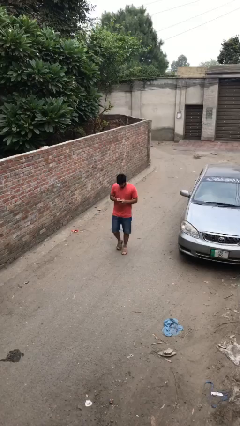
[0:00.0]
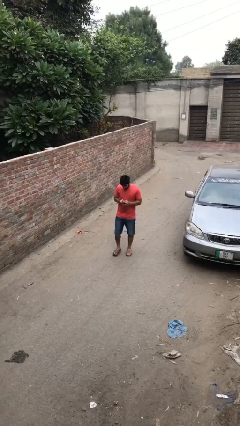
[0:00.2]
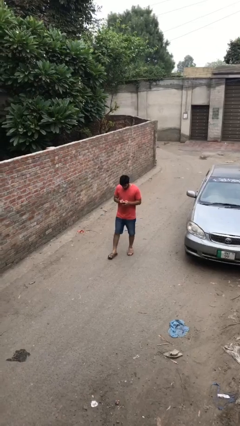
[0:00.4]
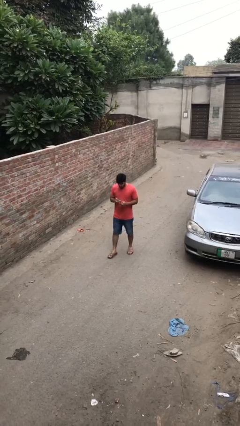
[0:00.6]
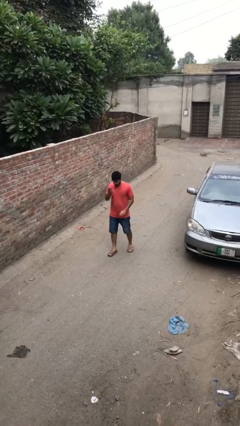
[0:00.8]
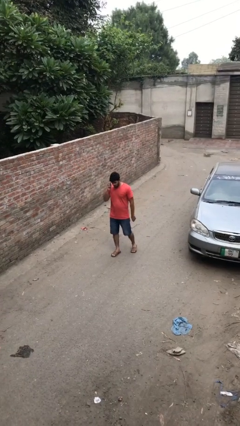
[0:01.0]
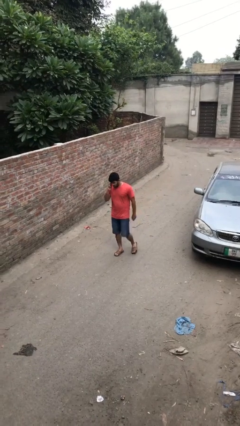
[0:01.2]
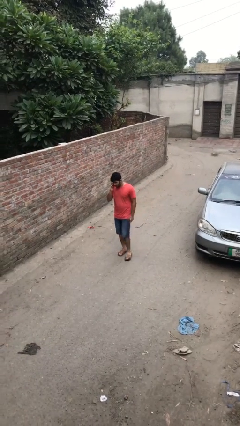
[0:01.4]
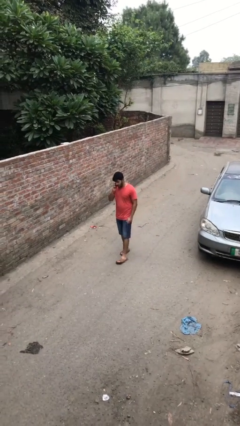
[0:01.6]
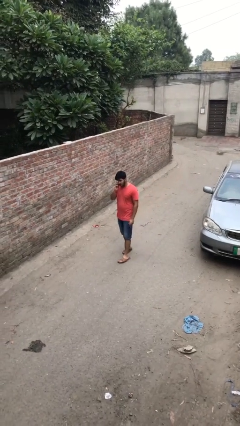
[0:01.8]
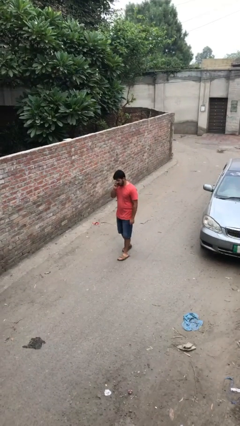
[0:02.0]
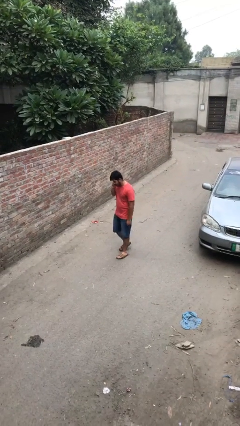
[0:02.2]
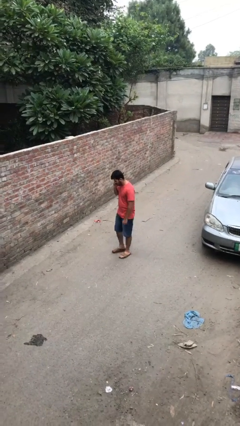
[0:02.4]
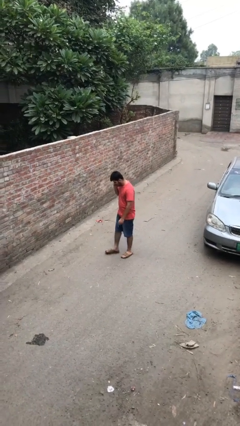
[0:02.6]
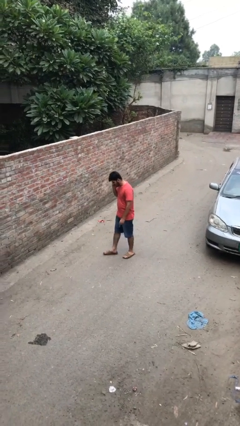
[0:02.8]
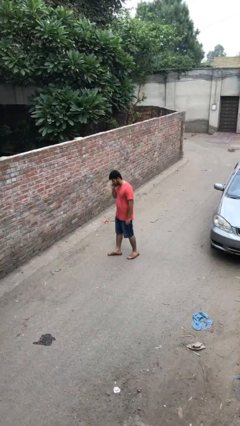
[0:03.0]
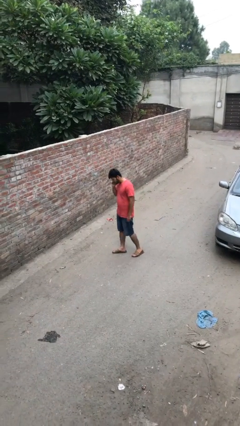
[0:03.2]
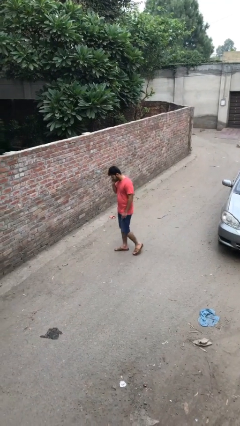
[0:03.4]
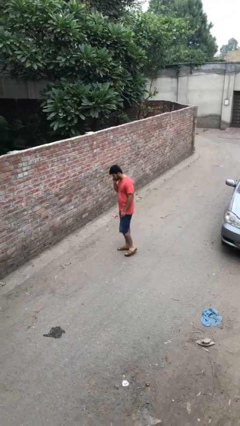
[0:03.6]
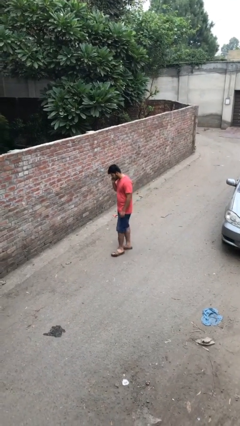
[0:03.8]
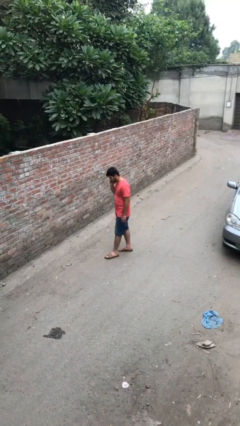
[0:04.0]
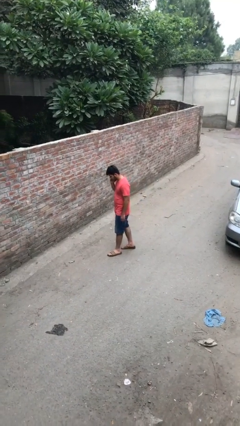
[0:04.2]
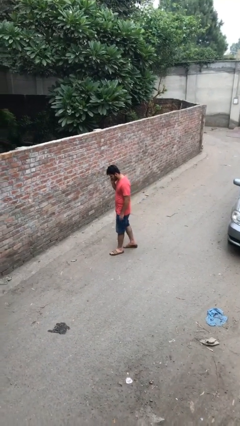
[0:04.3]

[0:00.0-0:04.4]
person talks on phone

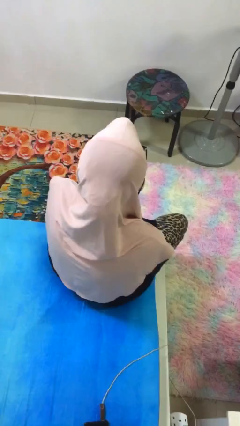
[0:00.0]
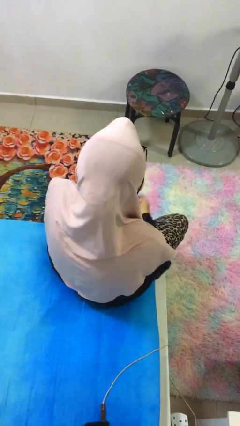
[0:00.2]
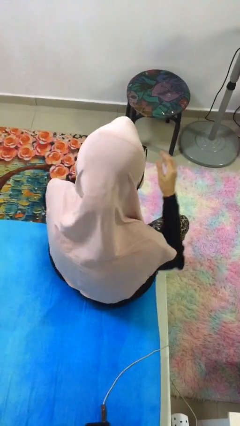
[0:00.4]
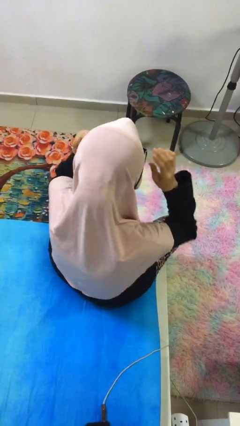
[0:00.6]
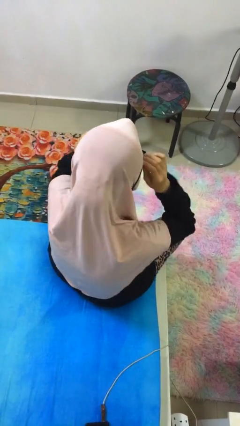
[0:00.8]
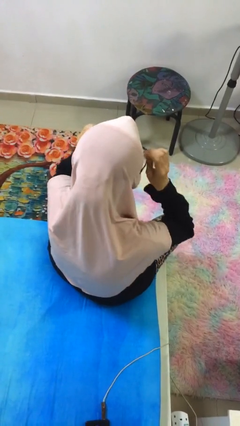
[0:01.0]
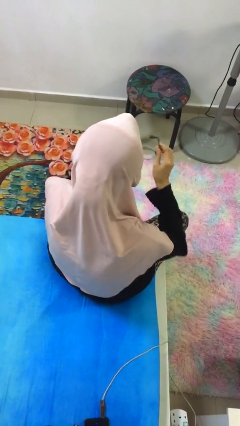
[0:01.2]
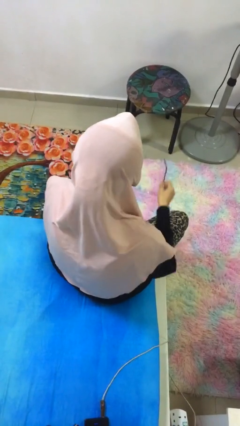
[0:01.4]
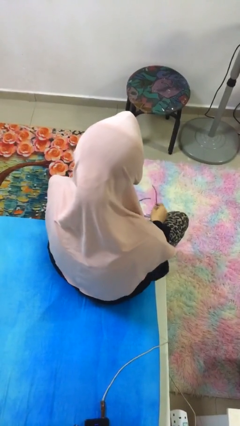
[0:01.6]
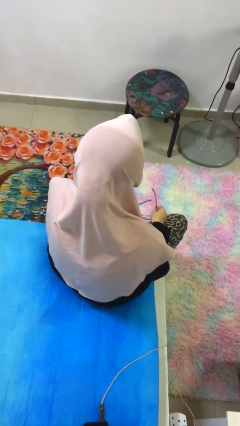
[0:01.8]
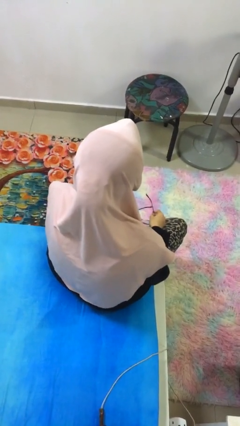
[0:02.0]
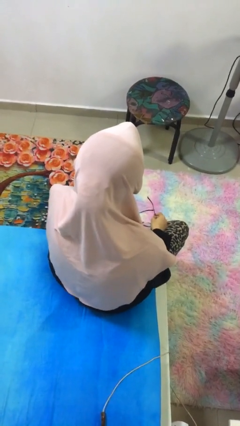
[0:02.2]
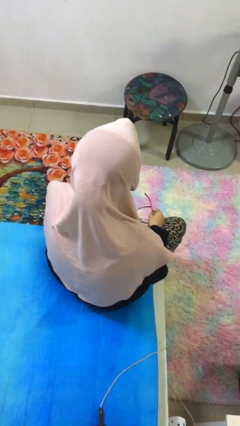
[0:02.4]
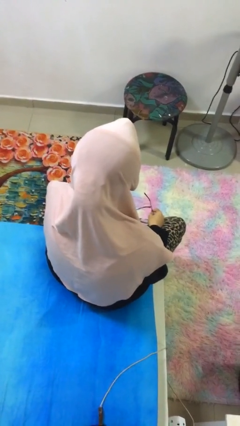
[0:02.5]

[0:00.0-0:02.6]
person takes off glasses

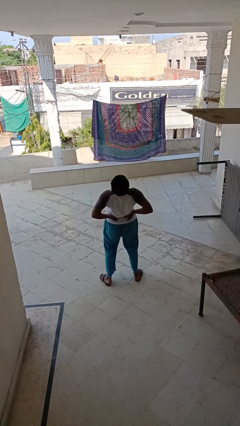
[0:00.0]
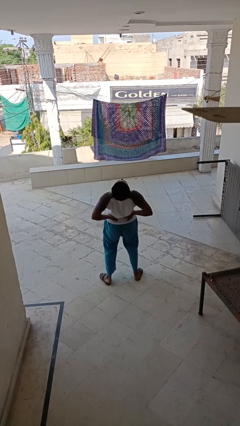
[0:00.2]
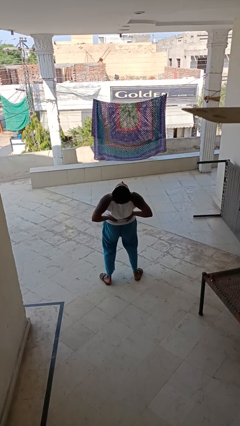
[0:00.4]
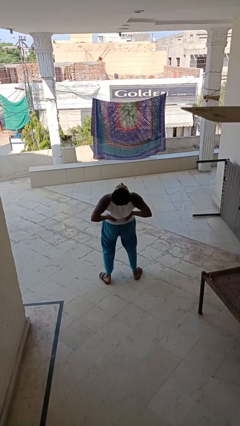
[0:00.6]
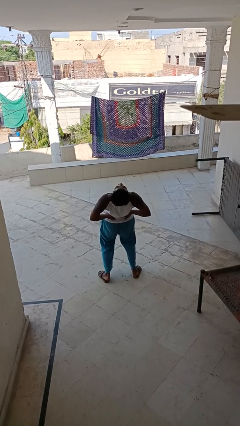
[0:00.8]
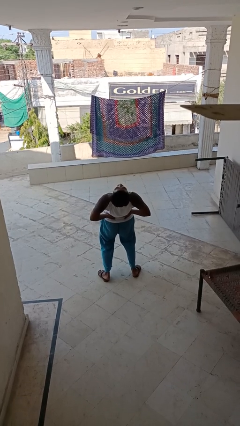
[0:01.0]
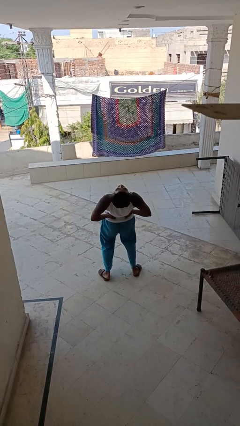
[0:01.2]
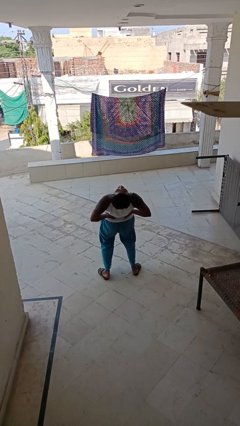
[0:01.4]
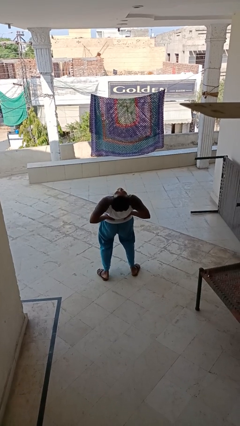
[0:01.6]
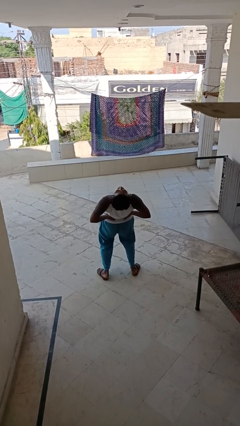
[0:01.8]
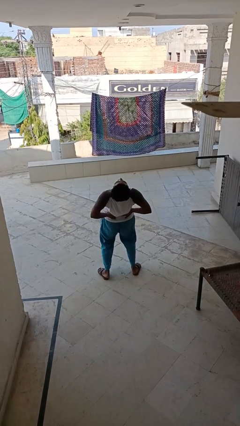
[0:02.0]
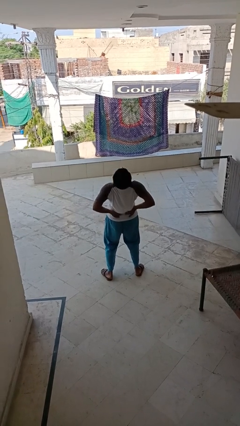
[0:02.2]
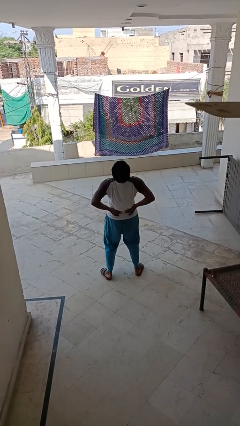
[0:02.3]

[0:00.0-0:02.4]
person stretches back

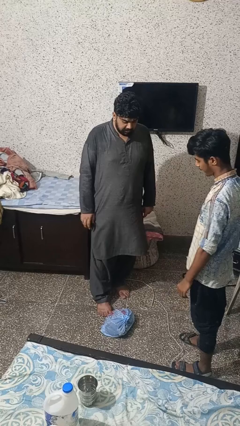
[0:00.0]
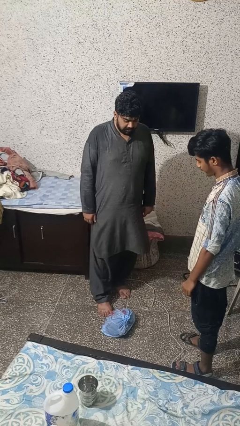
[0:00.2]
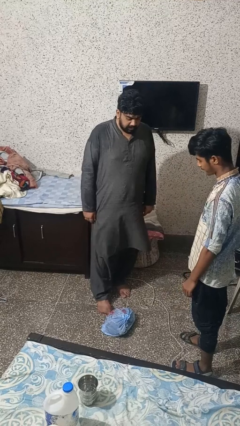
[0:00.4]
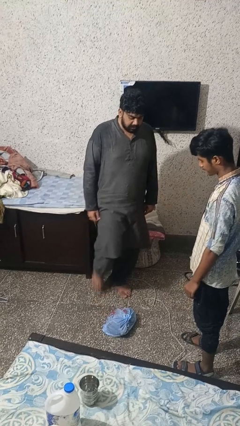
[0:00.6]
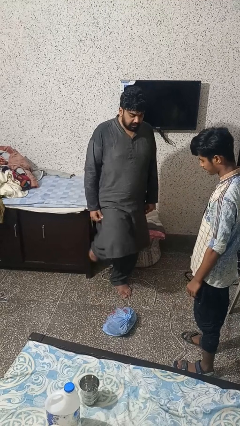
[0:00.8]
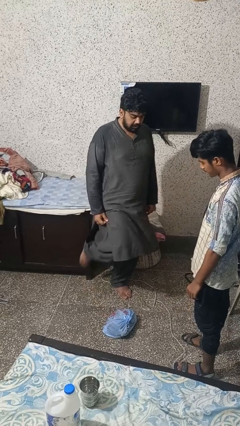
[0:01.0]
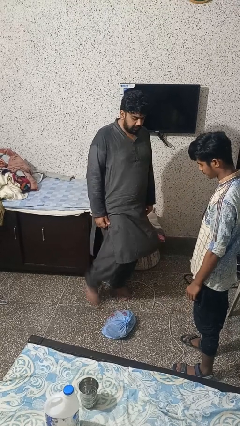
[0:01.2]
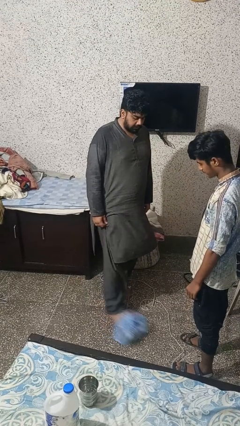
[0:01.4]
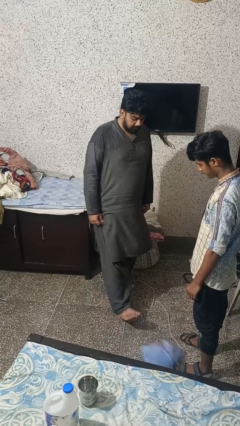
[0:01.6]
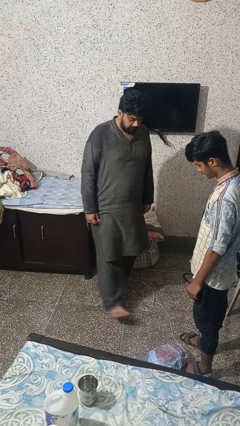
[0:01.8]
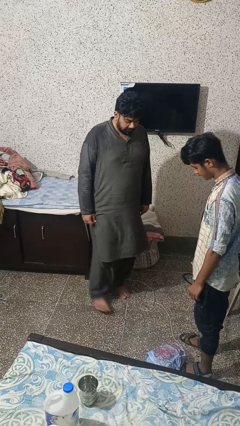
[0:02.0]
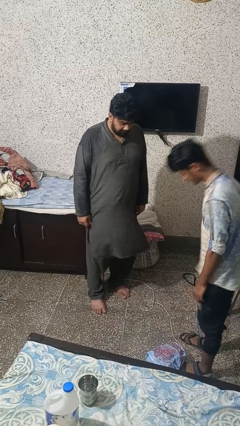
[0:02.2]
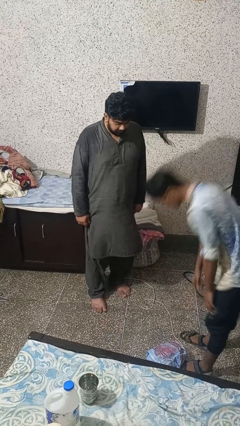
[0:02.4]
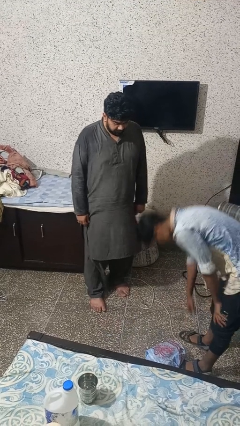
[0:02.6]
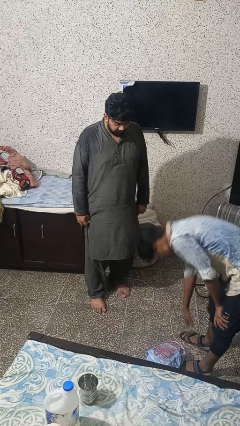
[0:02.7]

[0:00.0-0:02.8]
person kicks object to person

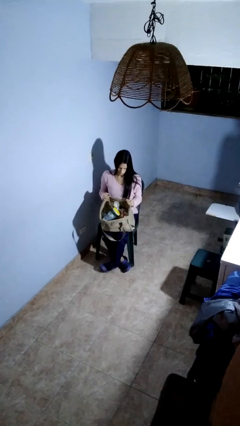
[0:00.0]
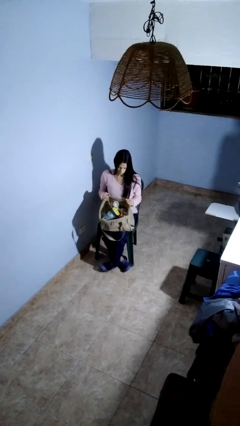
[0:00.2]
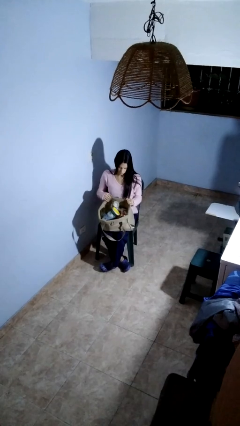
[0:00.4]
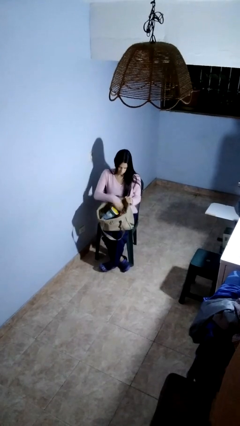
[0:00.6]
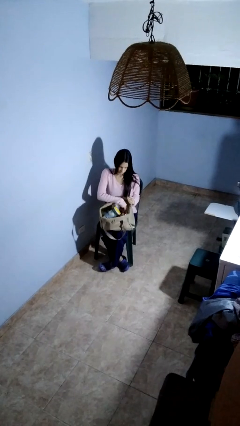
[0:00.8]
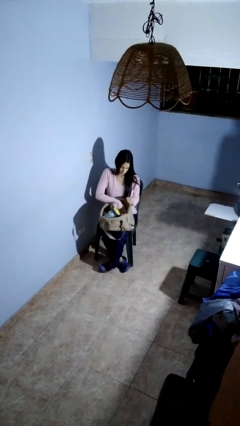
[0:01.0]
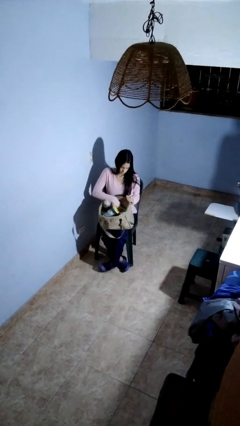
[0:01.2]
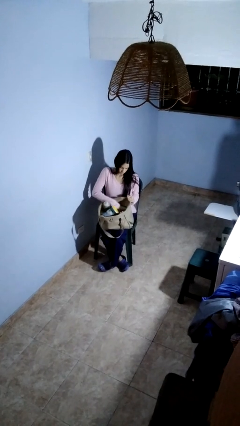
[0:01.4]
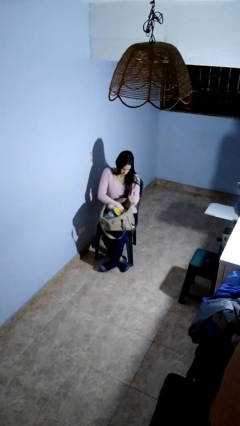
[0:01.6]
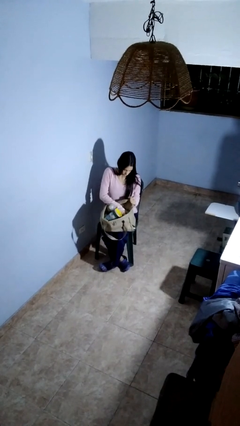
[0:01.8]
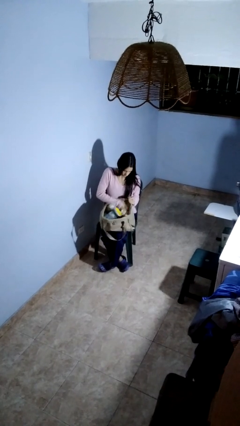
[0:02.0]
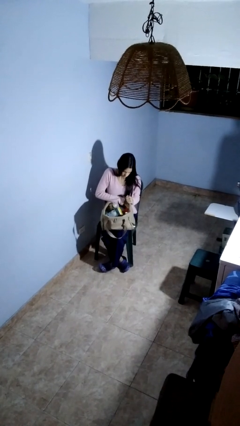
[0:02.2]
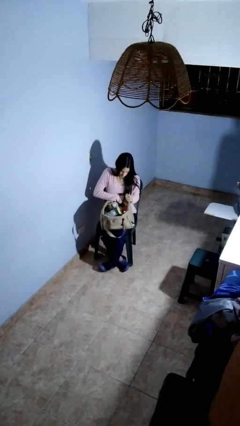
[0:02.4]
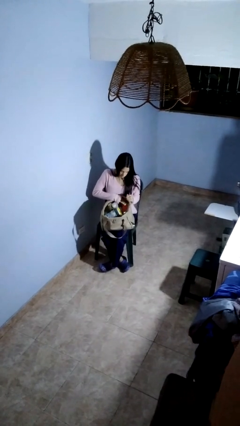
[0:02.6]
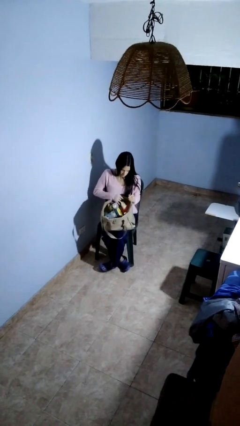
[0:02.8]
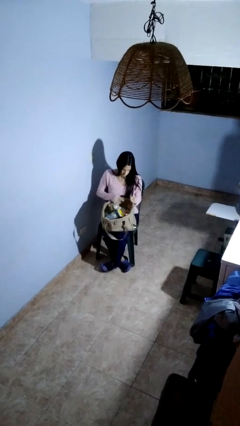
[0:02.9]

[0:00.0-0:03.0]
person searches in bag

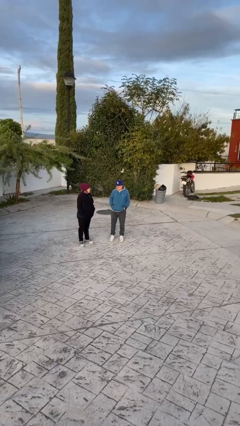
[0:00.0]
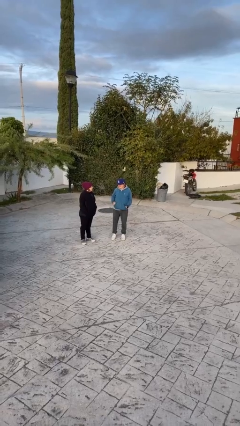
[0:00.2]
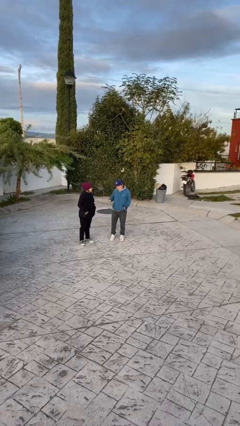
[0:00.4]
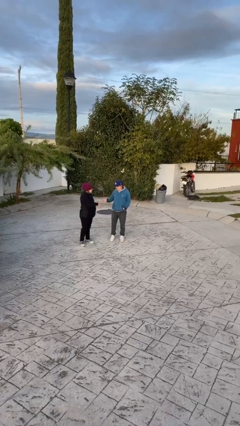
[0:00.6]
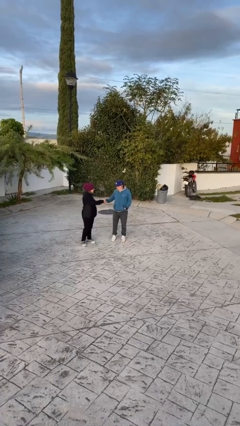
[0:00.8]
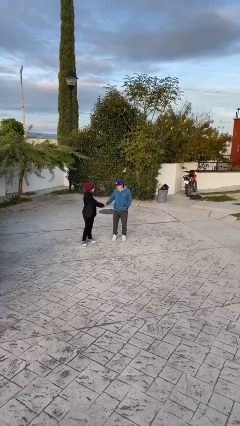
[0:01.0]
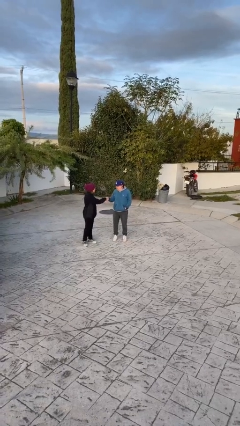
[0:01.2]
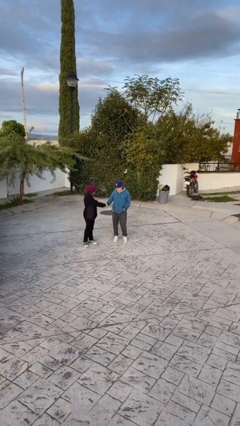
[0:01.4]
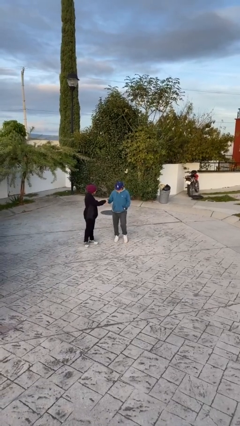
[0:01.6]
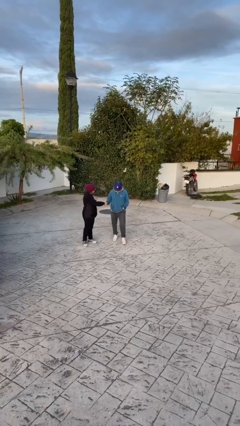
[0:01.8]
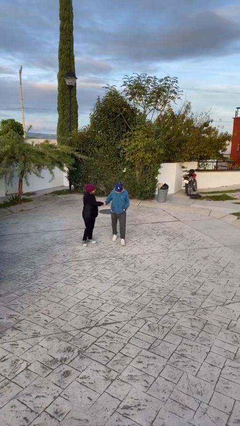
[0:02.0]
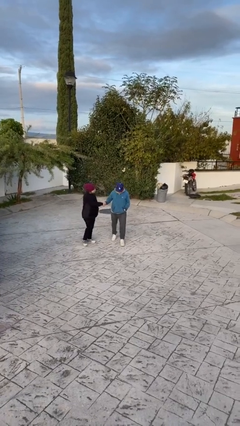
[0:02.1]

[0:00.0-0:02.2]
person shakes hand
